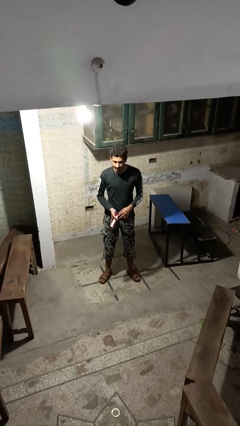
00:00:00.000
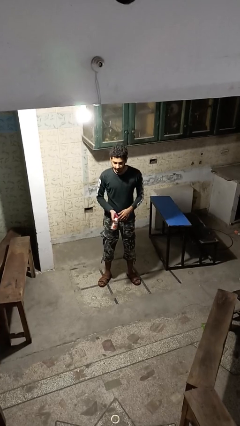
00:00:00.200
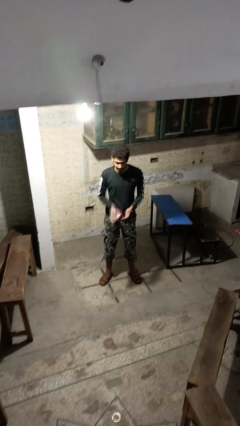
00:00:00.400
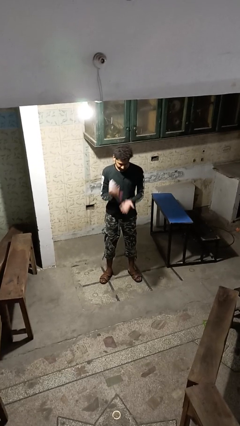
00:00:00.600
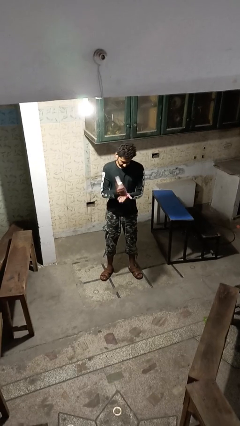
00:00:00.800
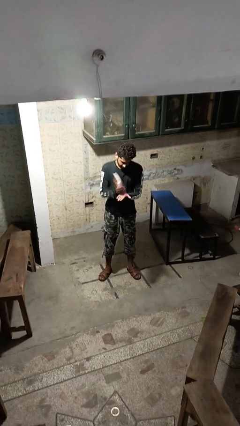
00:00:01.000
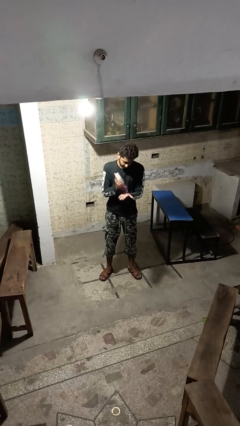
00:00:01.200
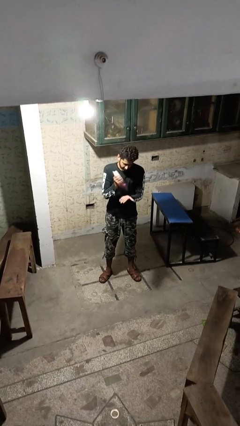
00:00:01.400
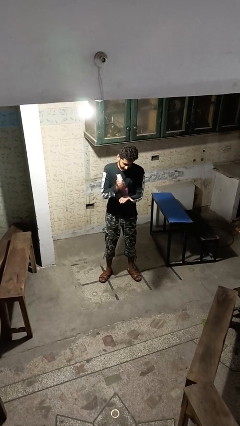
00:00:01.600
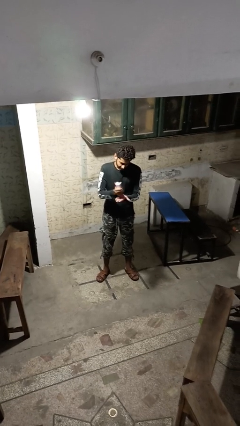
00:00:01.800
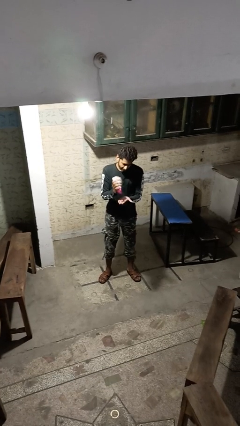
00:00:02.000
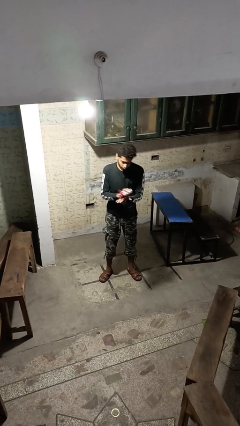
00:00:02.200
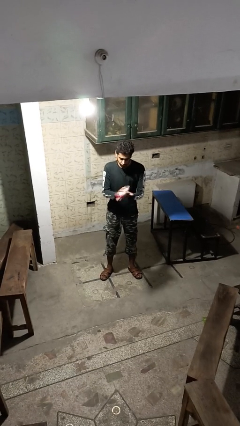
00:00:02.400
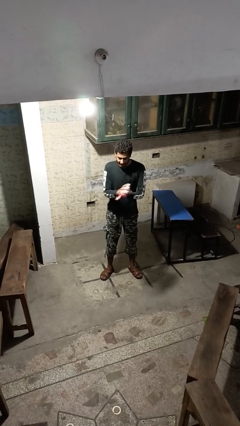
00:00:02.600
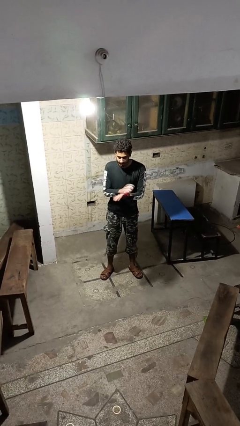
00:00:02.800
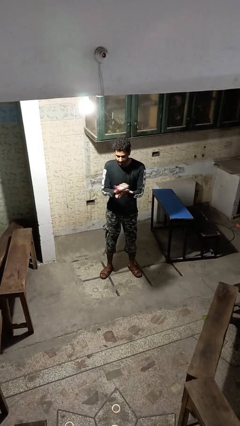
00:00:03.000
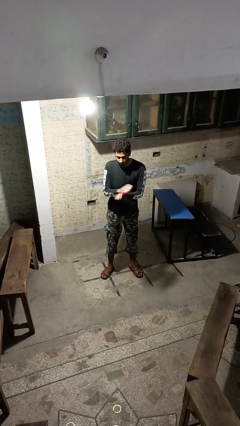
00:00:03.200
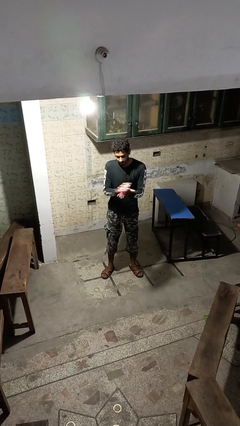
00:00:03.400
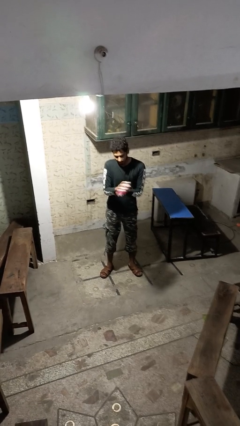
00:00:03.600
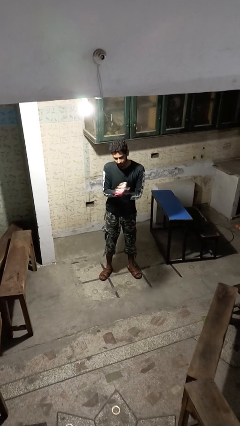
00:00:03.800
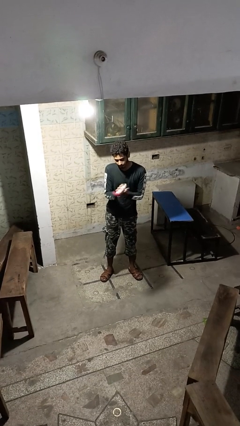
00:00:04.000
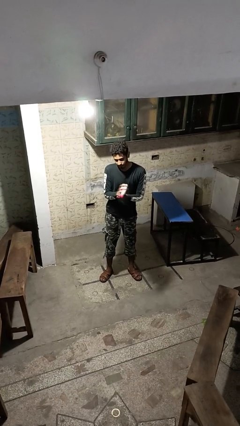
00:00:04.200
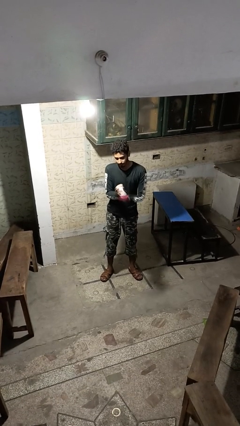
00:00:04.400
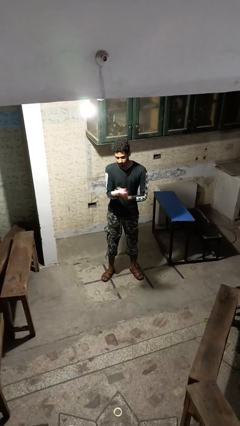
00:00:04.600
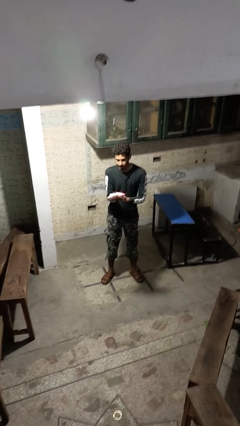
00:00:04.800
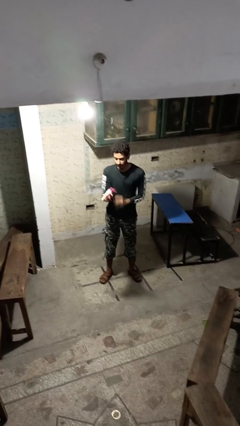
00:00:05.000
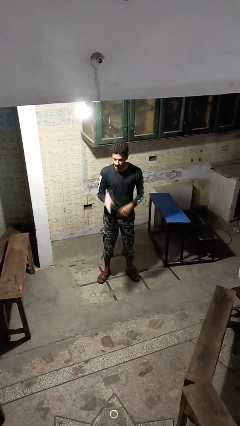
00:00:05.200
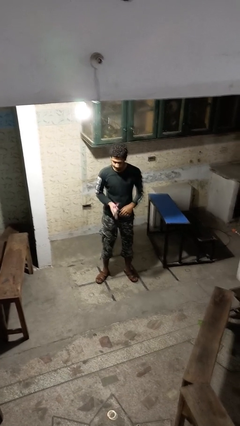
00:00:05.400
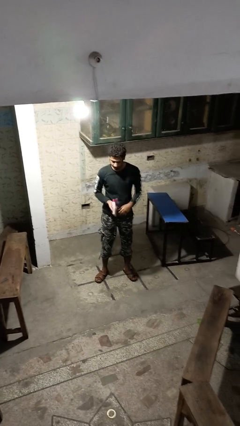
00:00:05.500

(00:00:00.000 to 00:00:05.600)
person applies sunscreen

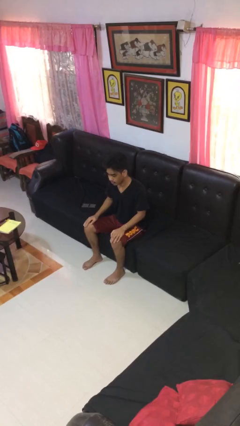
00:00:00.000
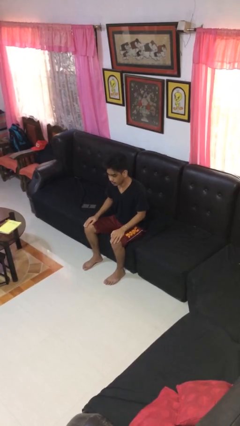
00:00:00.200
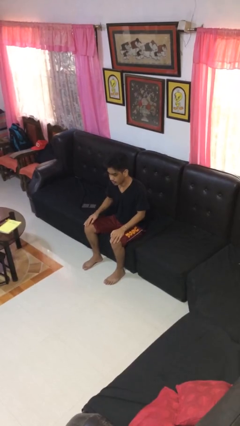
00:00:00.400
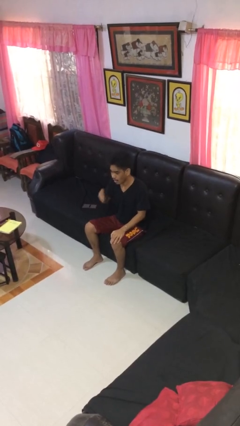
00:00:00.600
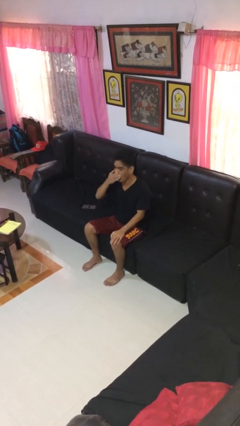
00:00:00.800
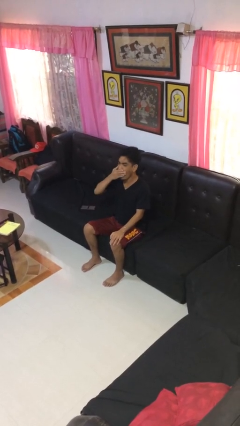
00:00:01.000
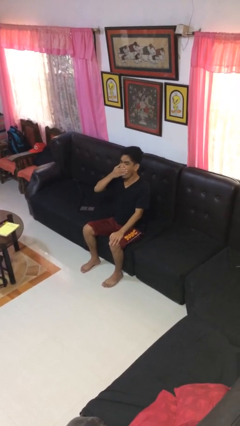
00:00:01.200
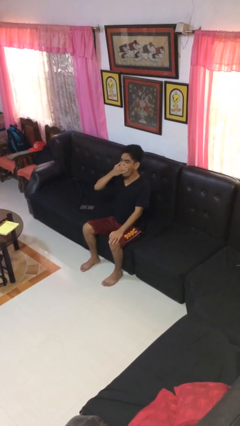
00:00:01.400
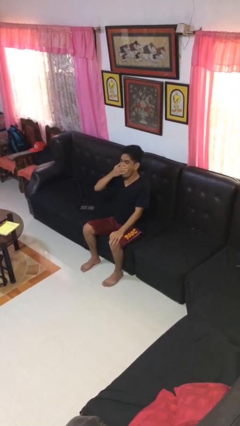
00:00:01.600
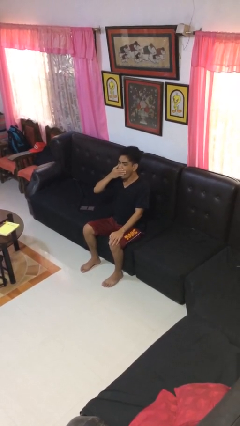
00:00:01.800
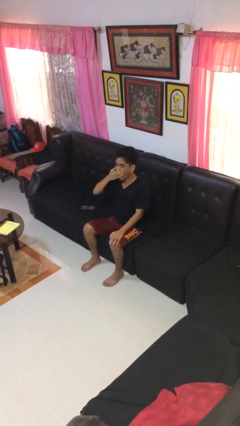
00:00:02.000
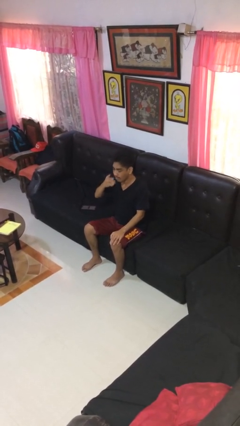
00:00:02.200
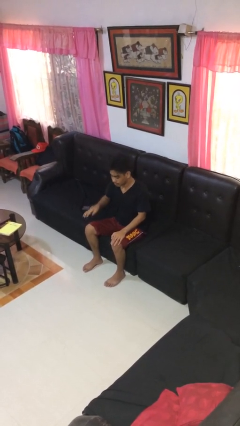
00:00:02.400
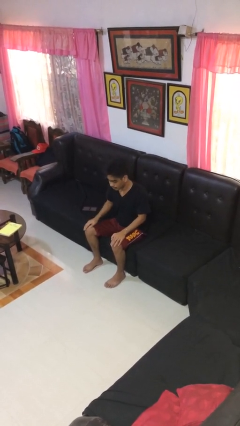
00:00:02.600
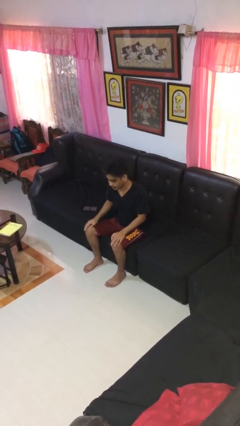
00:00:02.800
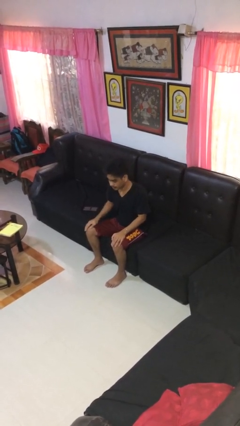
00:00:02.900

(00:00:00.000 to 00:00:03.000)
person yawns

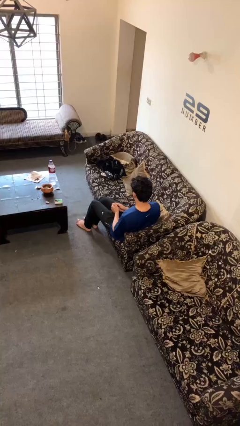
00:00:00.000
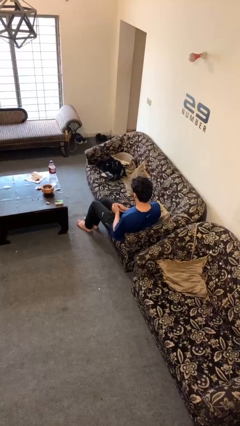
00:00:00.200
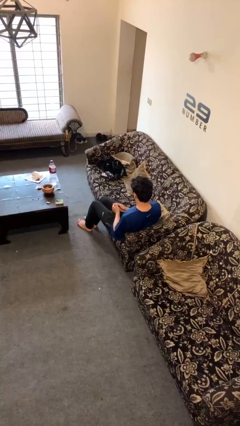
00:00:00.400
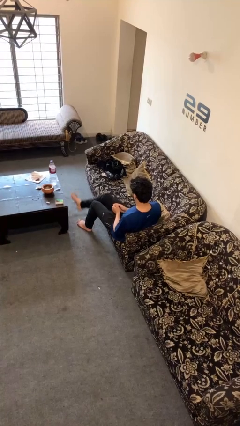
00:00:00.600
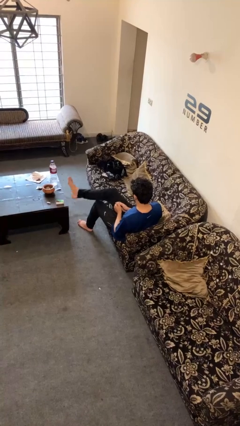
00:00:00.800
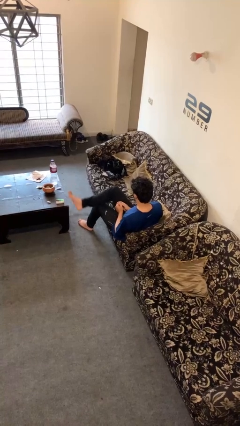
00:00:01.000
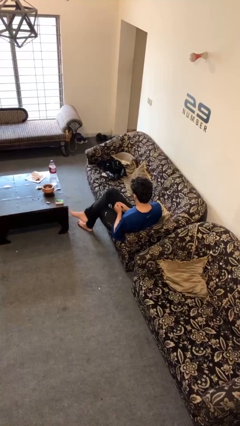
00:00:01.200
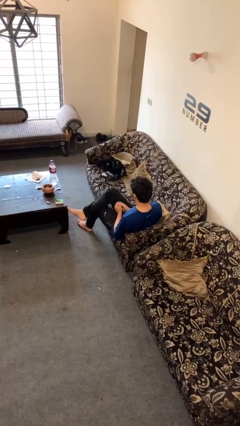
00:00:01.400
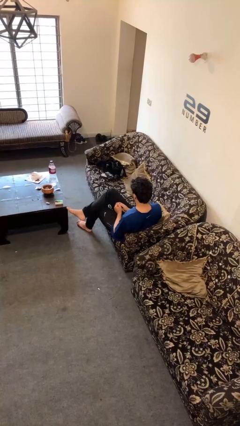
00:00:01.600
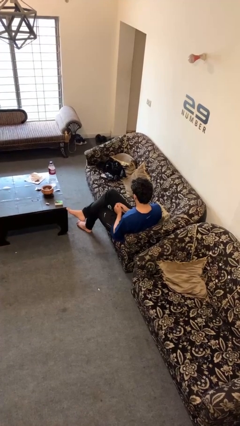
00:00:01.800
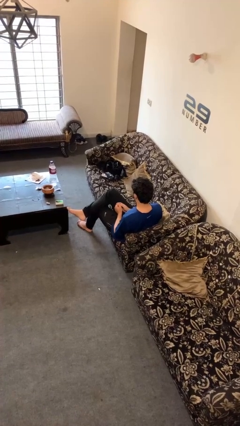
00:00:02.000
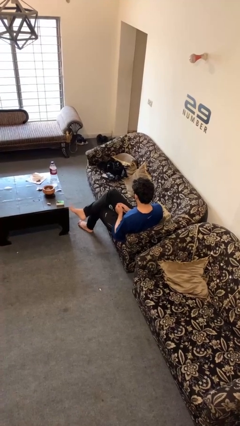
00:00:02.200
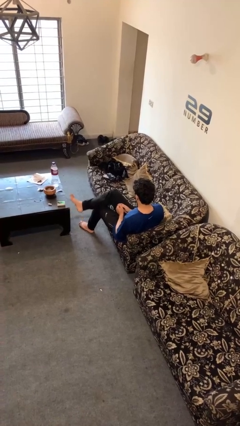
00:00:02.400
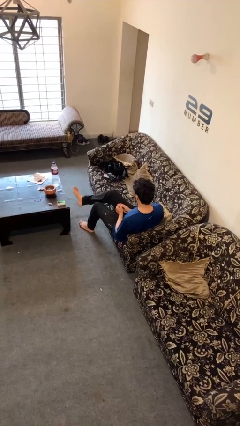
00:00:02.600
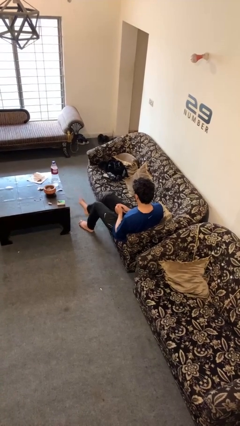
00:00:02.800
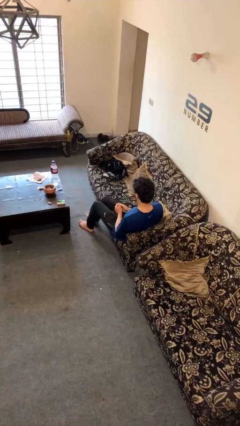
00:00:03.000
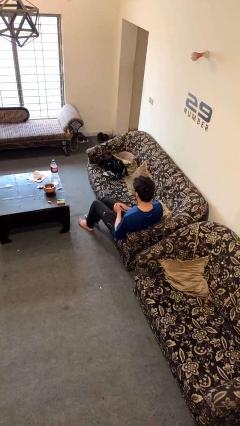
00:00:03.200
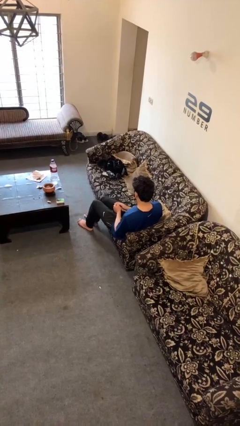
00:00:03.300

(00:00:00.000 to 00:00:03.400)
person crosses legs

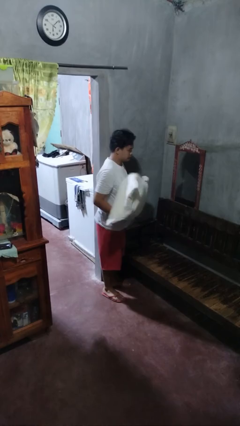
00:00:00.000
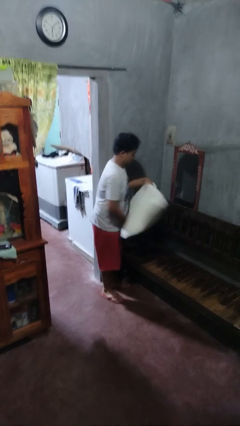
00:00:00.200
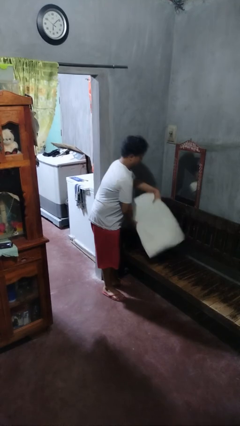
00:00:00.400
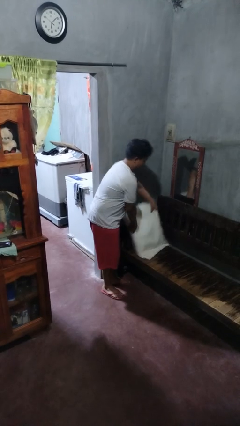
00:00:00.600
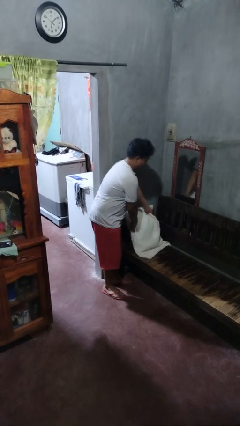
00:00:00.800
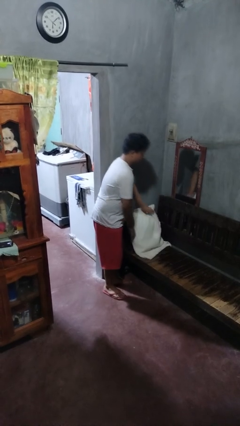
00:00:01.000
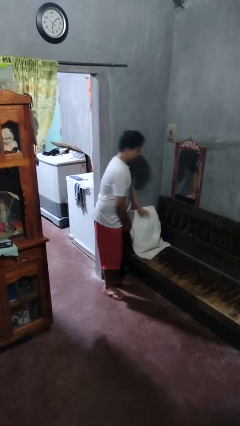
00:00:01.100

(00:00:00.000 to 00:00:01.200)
person puts down object on couch

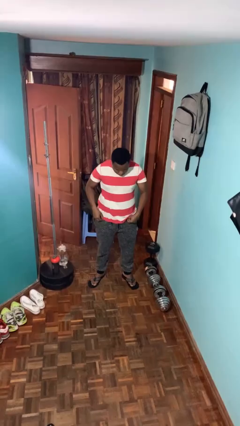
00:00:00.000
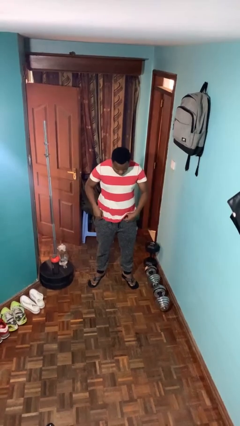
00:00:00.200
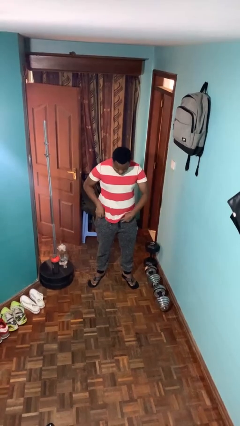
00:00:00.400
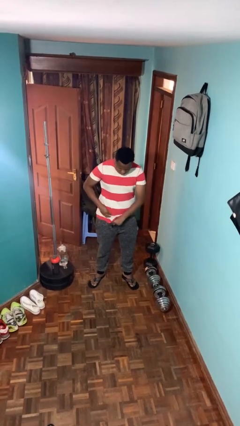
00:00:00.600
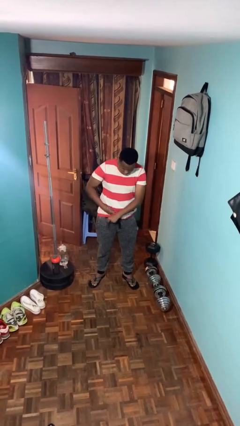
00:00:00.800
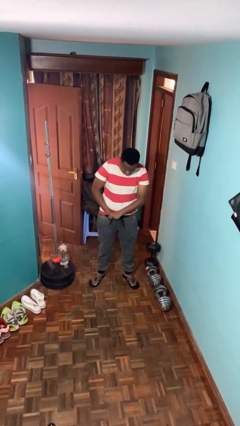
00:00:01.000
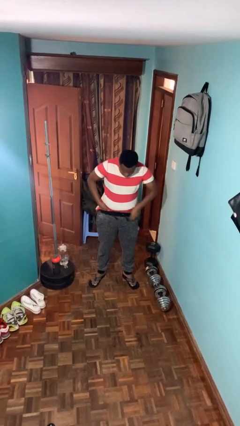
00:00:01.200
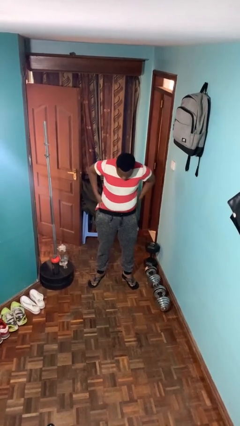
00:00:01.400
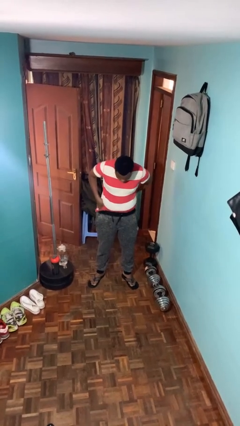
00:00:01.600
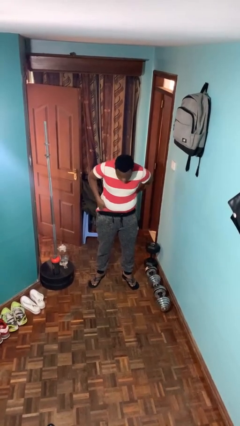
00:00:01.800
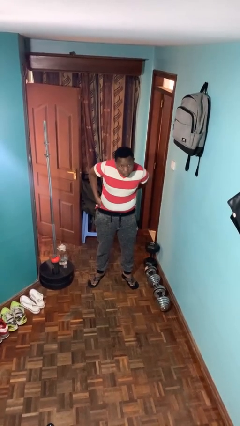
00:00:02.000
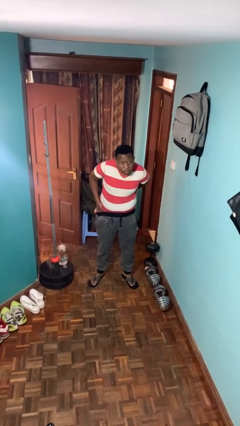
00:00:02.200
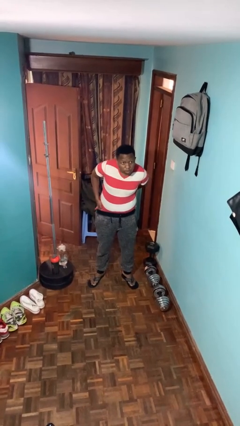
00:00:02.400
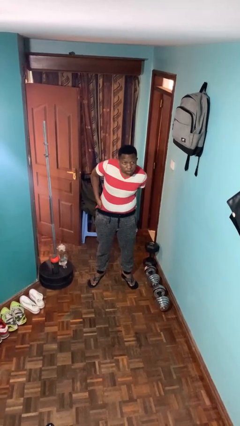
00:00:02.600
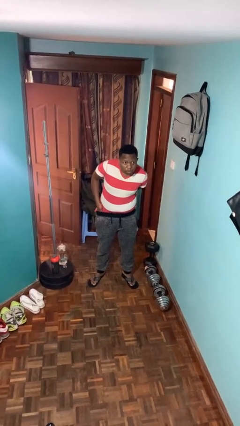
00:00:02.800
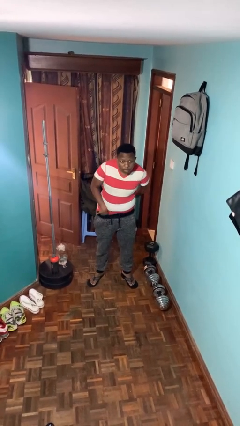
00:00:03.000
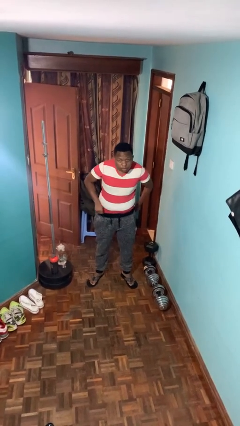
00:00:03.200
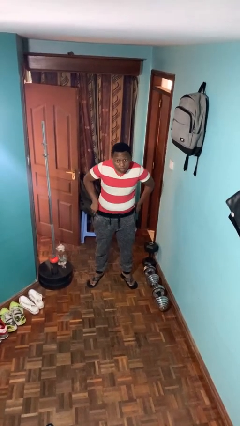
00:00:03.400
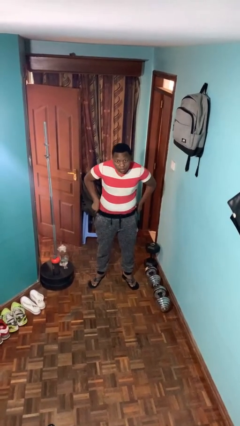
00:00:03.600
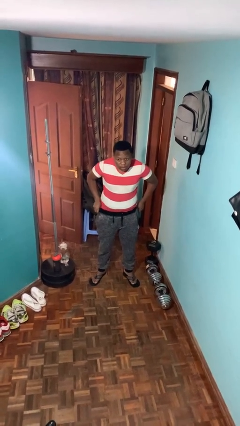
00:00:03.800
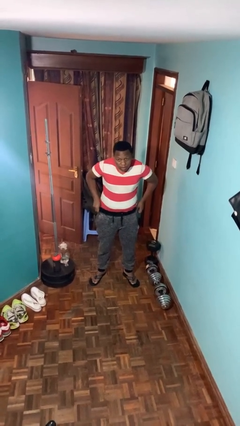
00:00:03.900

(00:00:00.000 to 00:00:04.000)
person tucks in shirt

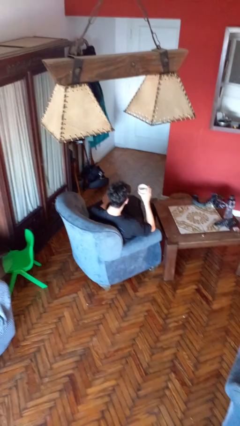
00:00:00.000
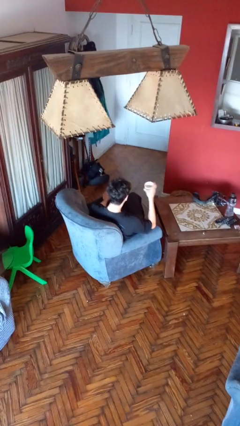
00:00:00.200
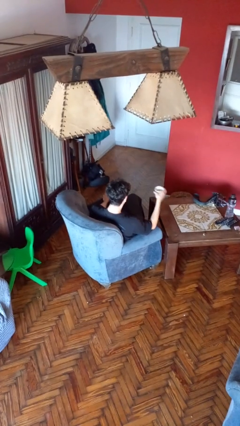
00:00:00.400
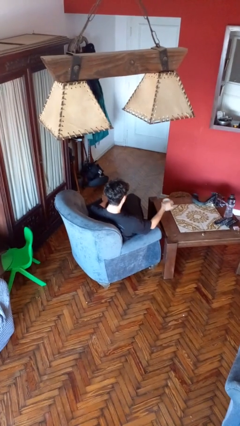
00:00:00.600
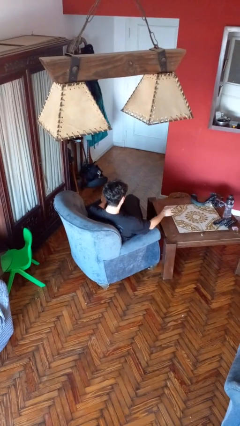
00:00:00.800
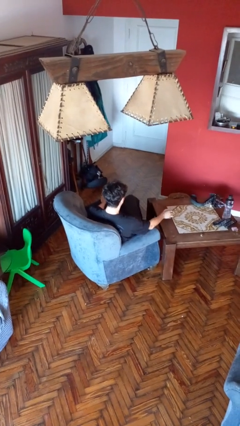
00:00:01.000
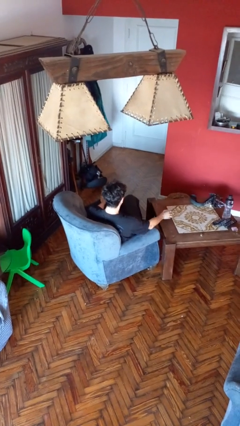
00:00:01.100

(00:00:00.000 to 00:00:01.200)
person puts down object on table
